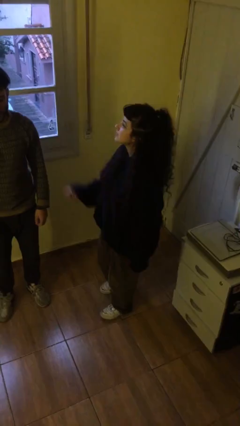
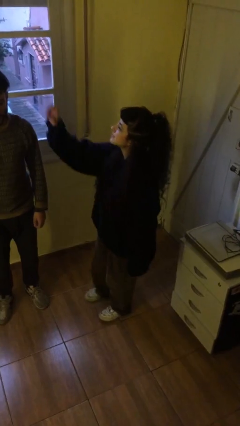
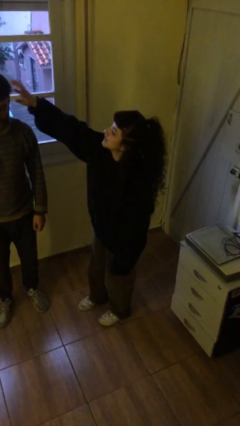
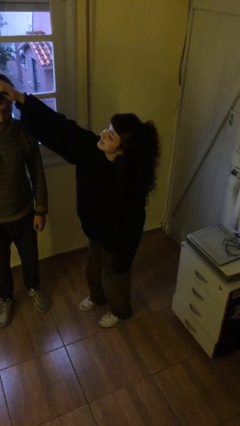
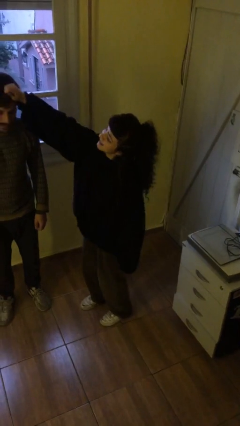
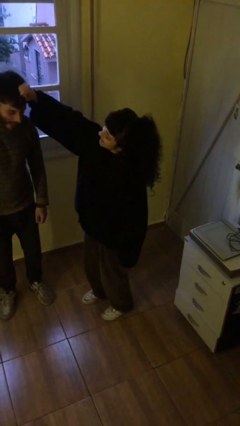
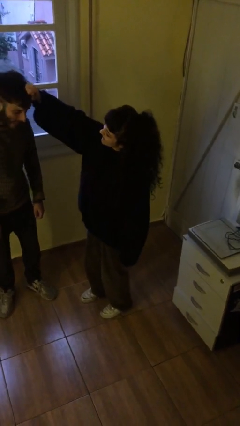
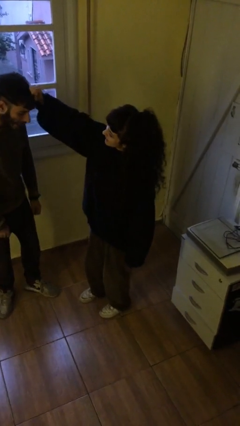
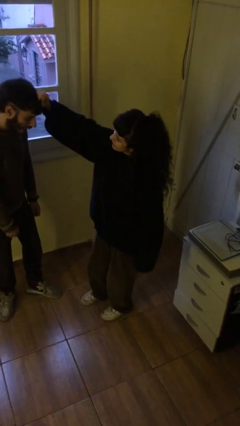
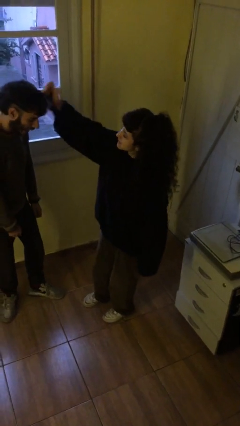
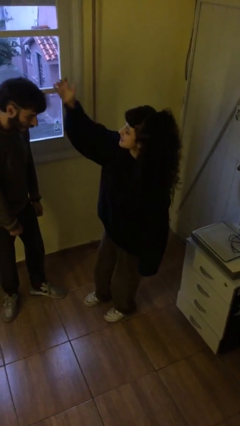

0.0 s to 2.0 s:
person grabs person by hair

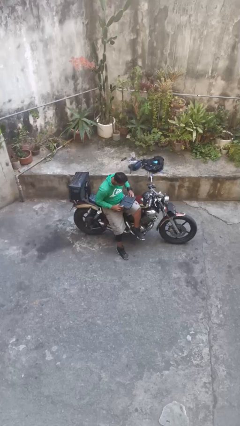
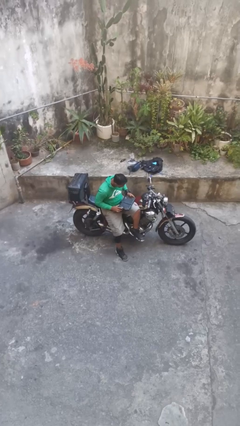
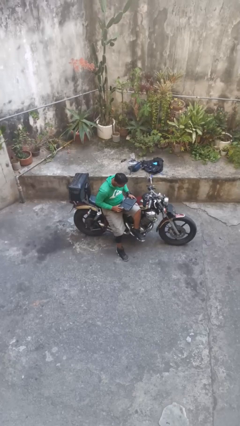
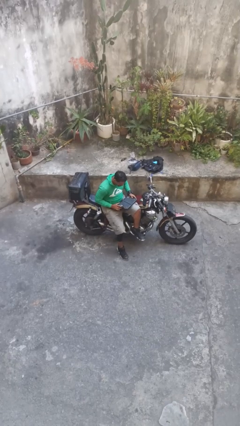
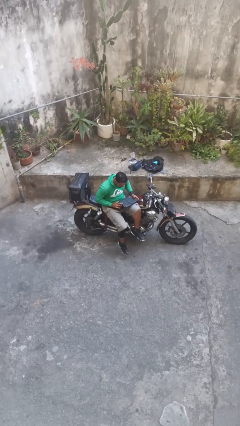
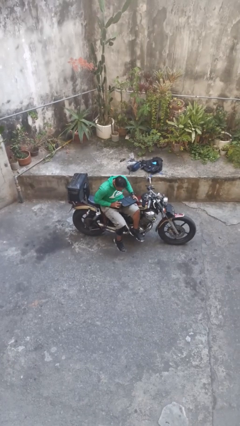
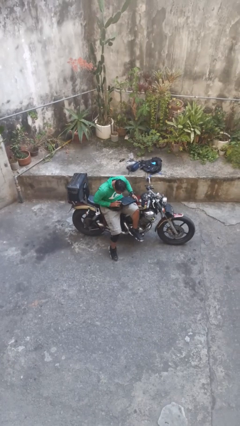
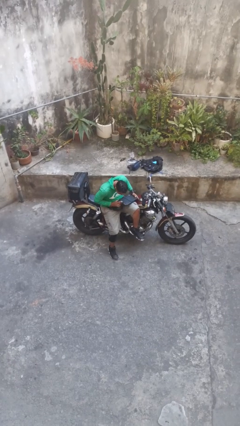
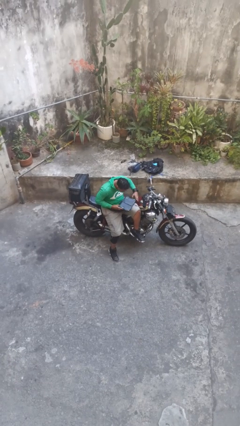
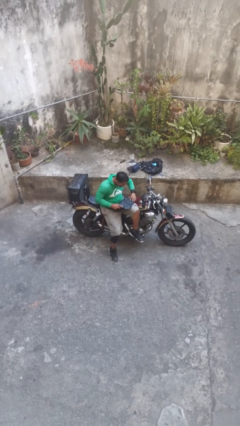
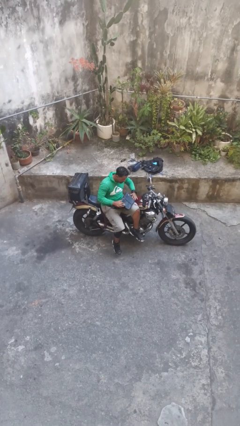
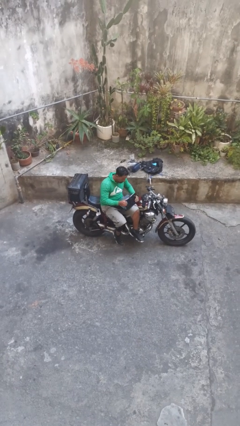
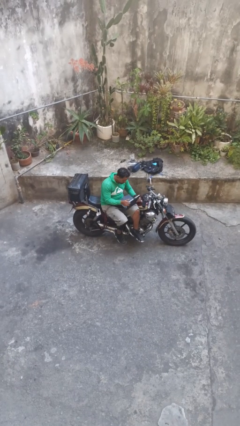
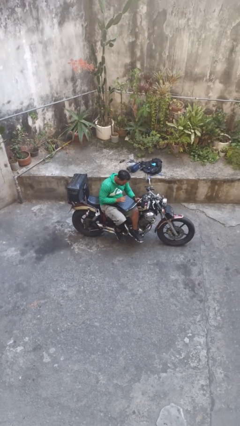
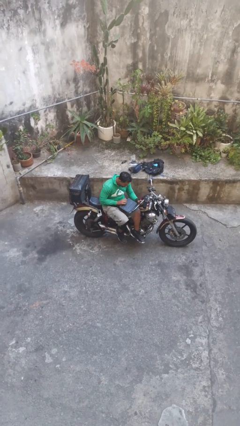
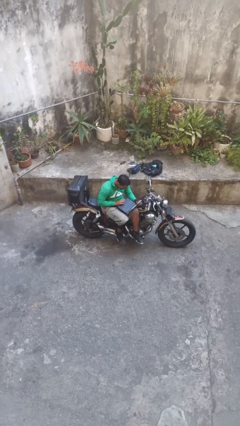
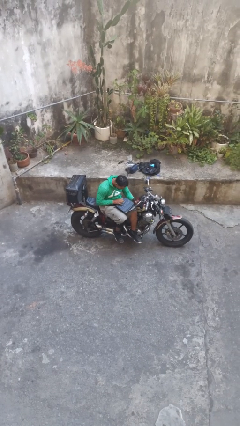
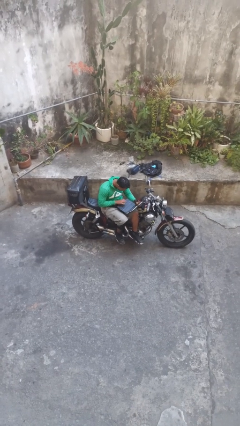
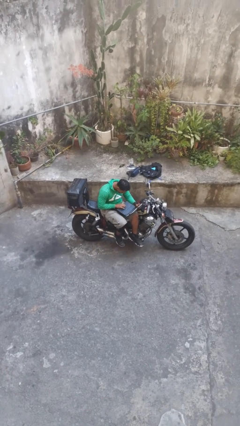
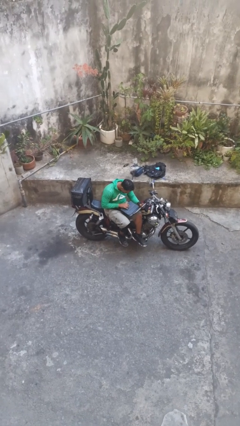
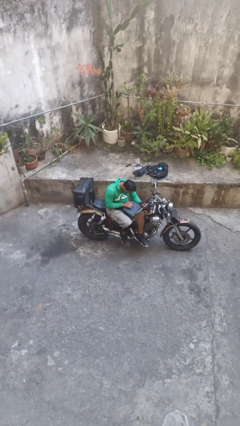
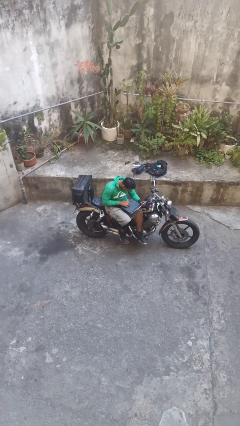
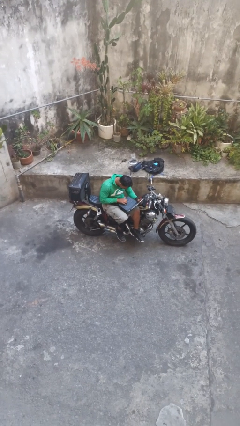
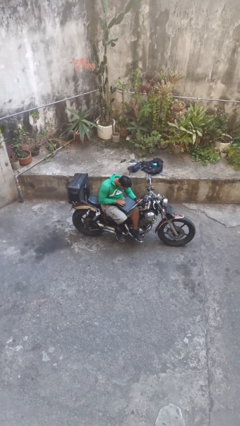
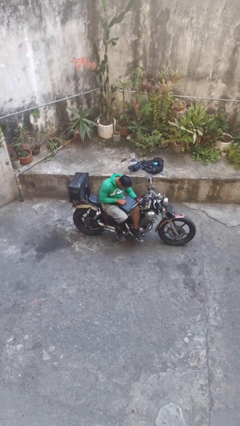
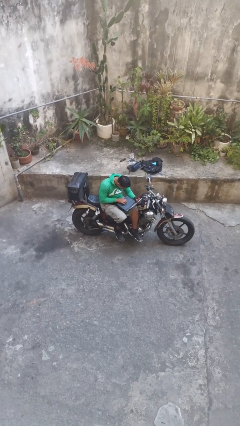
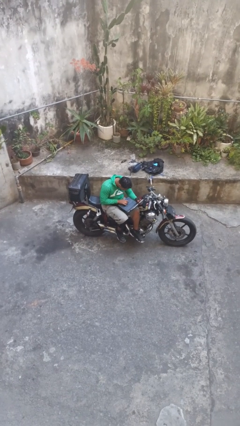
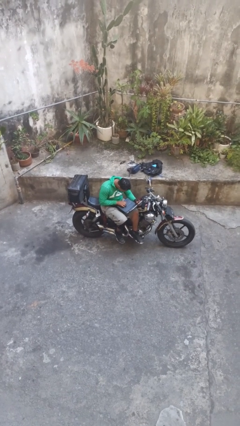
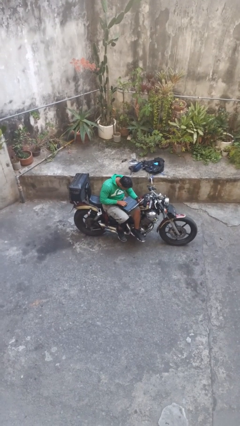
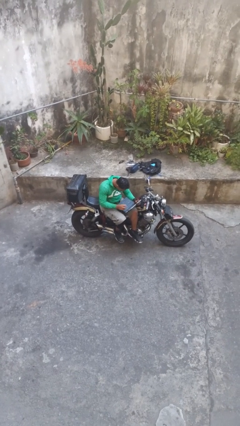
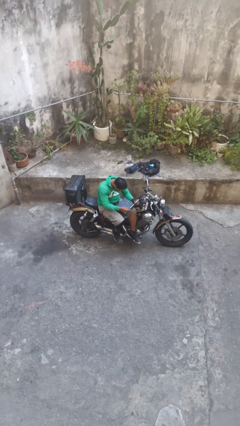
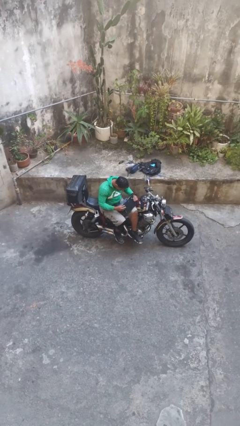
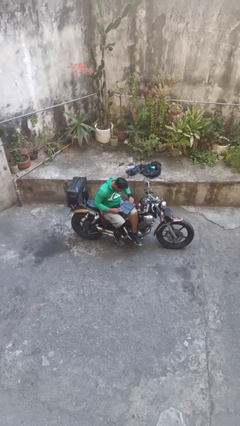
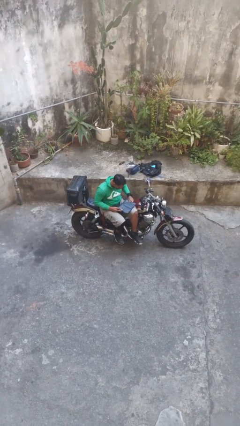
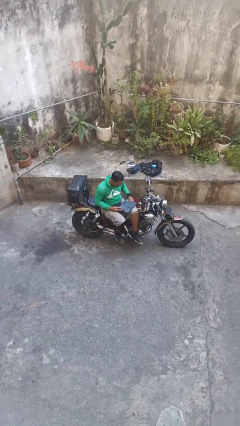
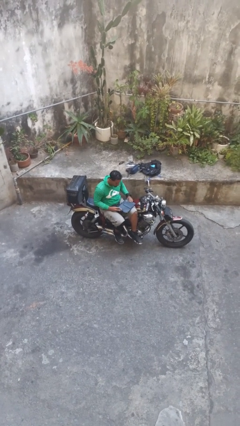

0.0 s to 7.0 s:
person interacts with laptop

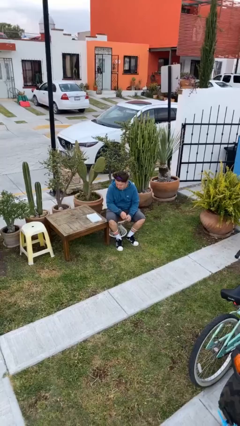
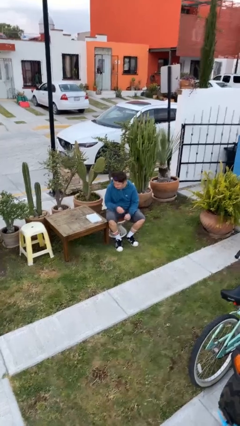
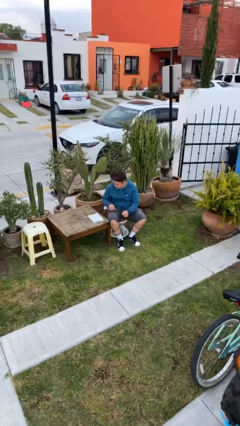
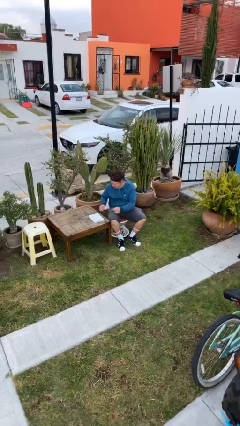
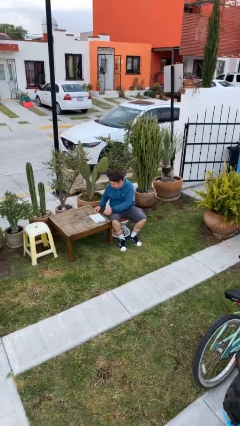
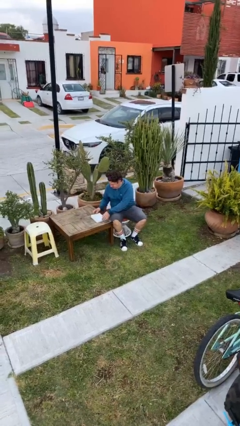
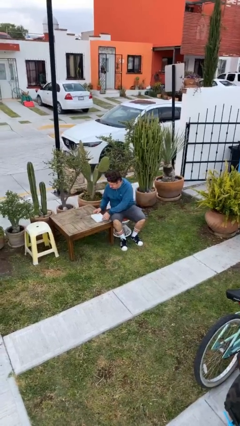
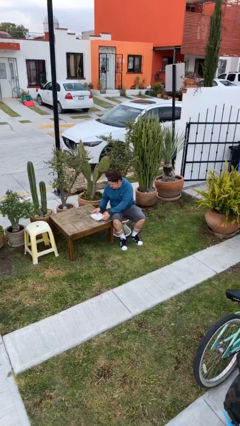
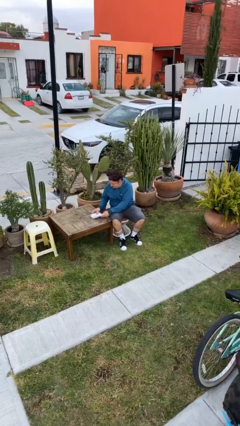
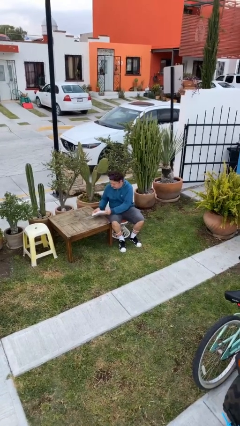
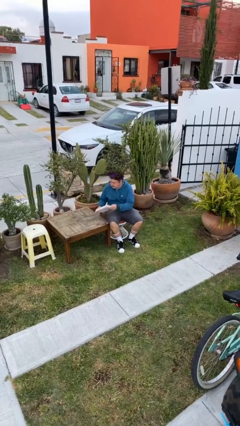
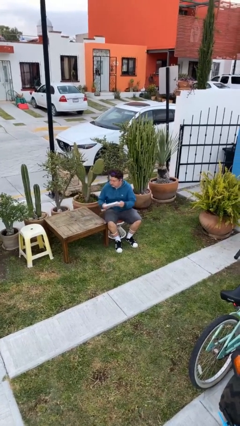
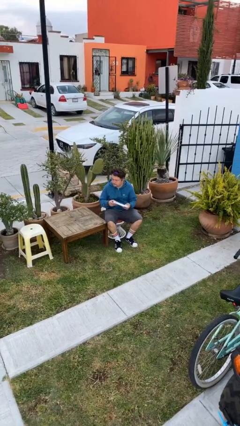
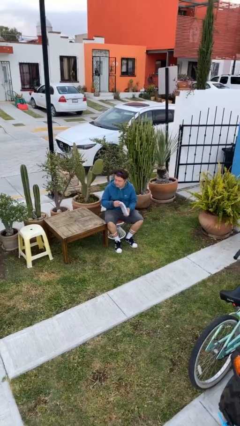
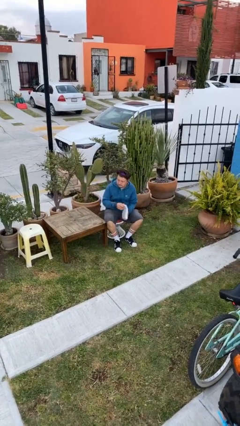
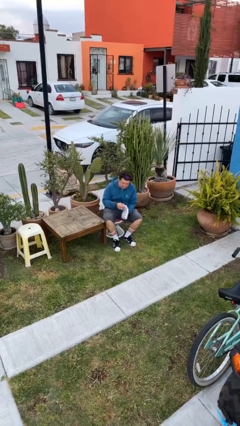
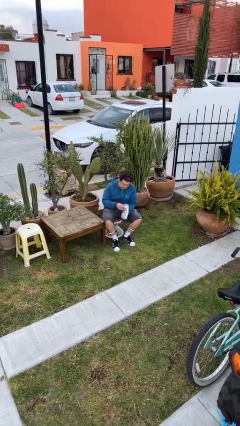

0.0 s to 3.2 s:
person picks up object from table

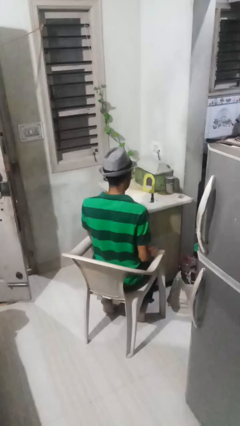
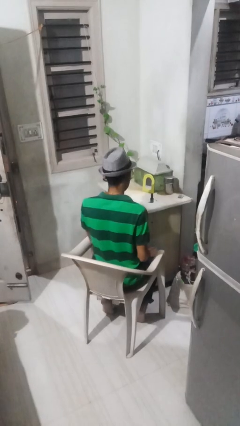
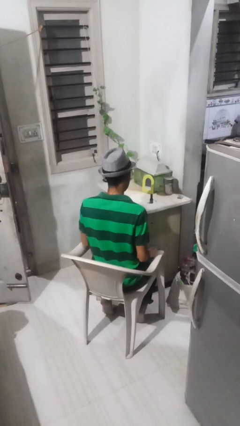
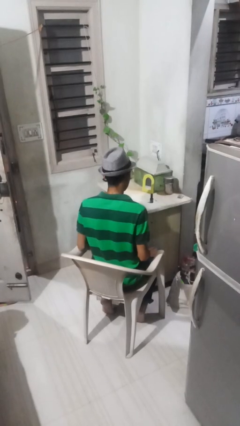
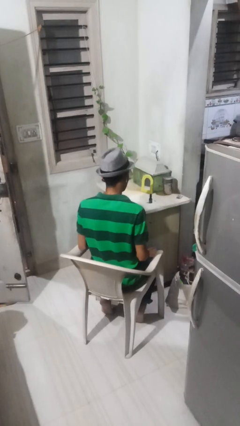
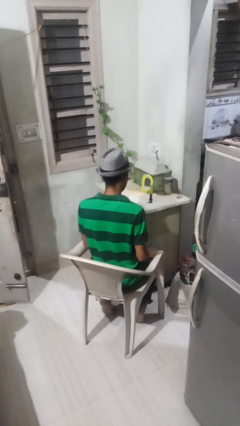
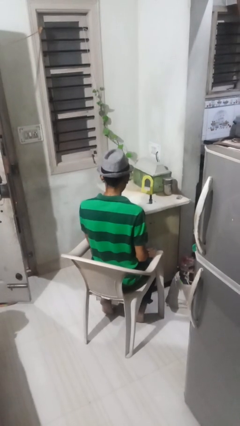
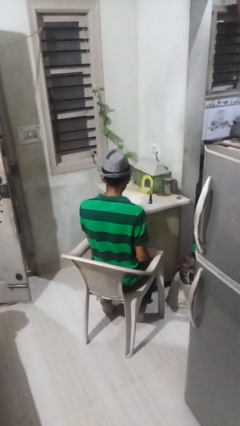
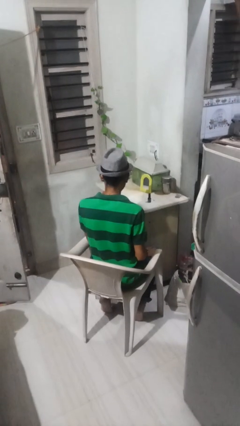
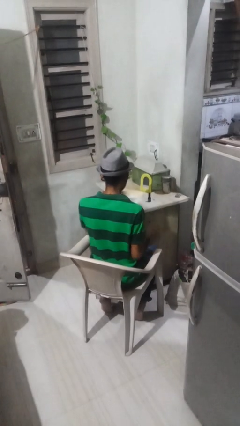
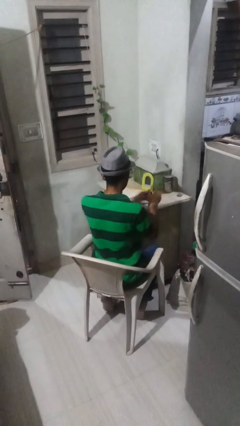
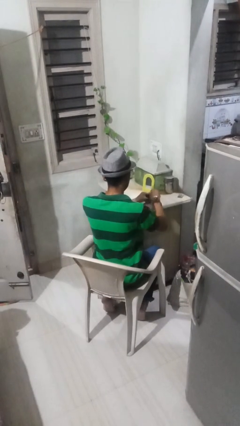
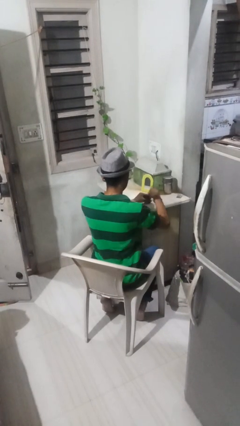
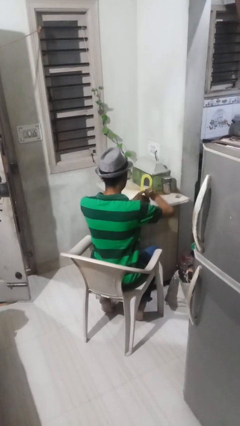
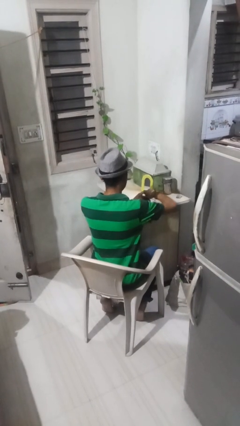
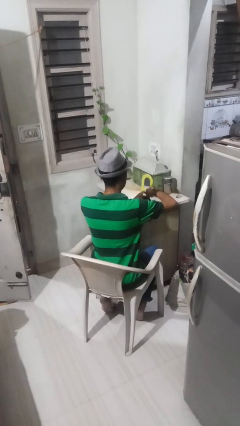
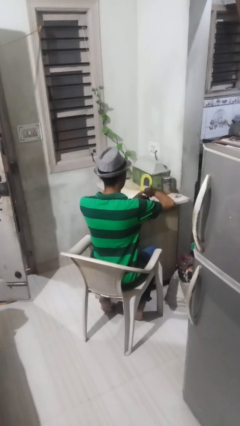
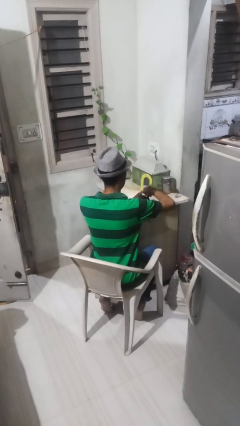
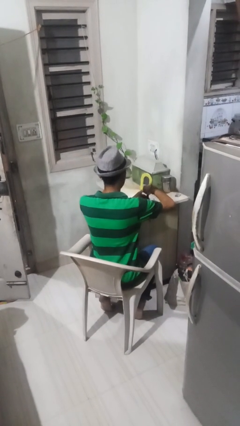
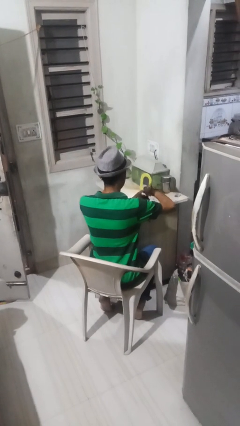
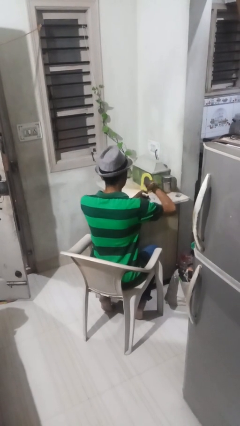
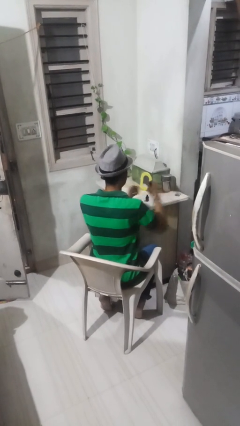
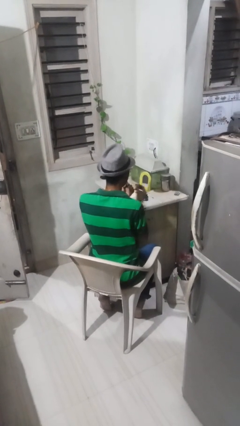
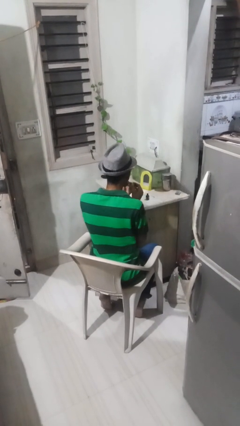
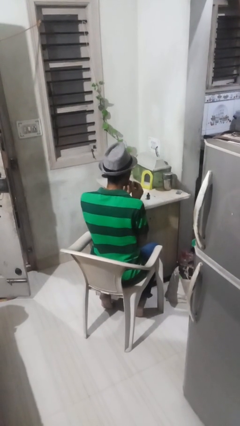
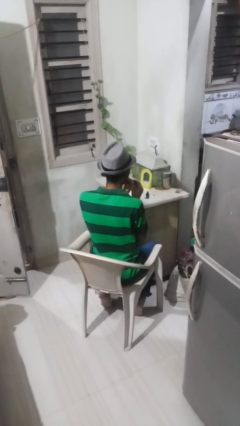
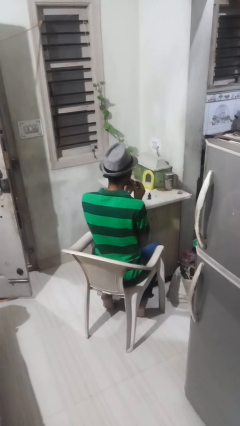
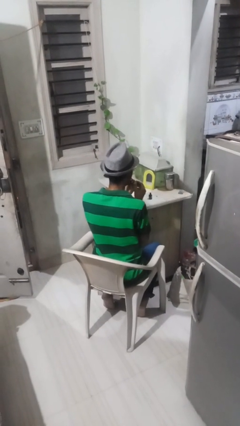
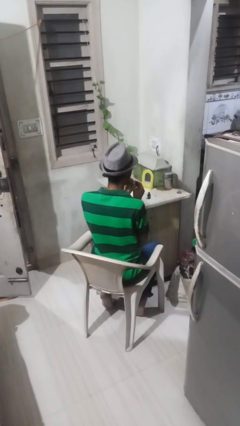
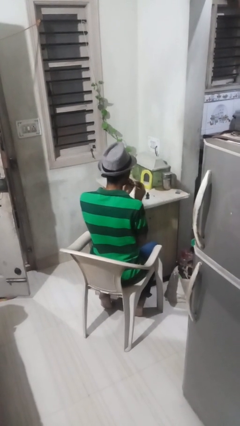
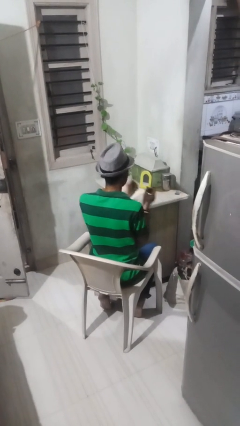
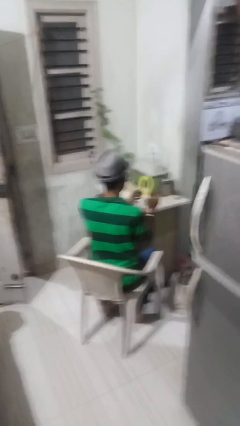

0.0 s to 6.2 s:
person paints fingernails
